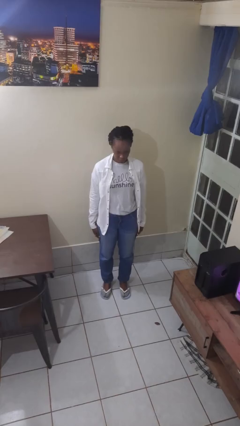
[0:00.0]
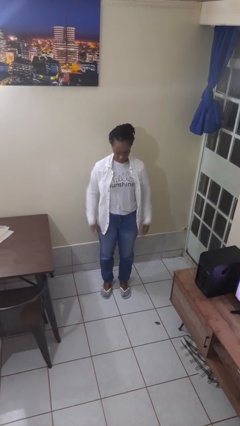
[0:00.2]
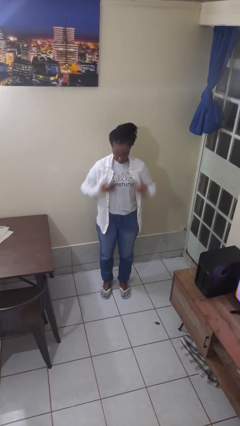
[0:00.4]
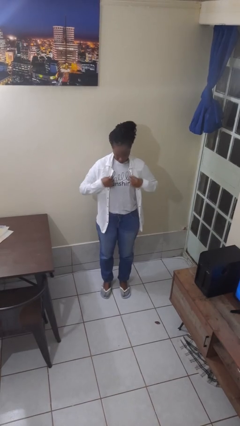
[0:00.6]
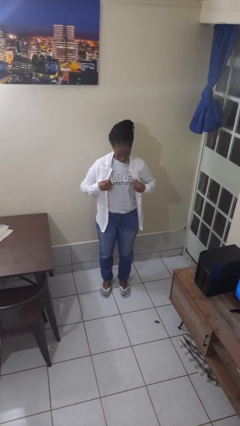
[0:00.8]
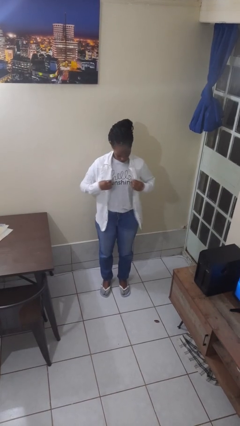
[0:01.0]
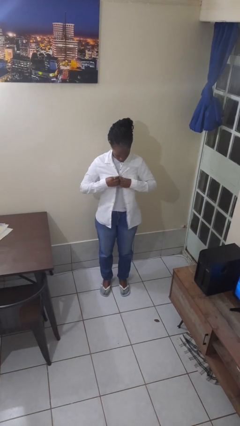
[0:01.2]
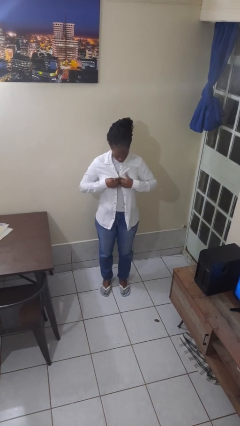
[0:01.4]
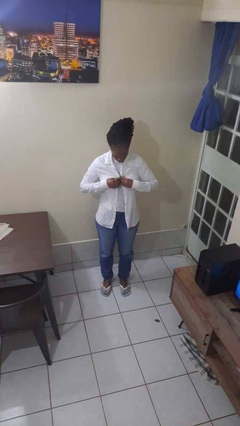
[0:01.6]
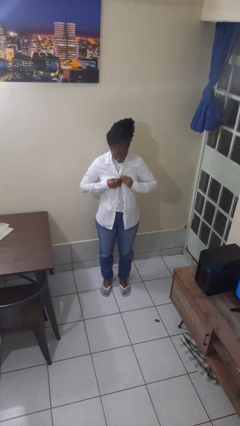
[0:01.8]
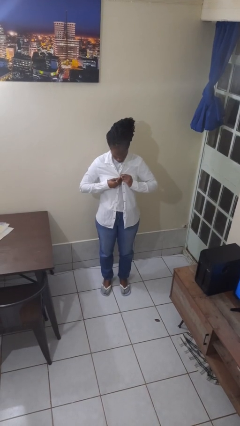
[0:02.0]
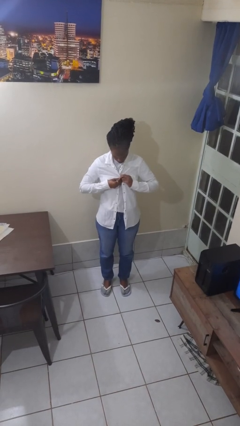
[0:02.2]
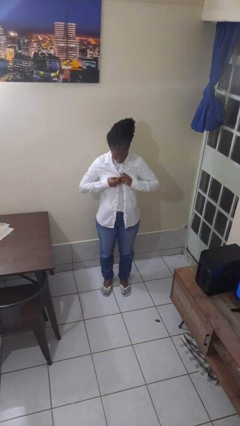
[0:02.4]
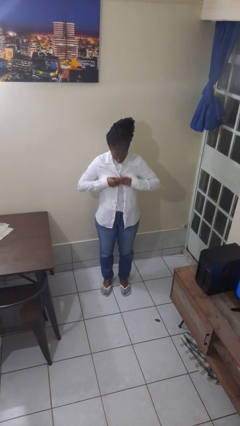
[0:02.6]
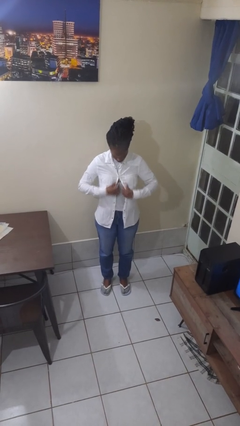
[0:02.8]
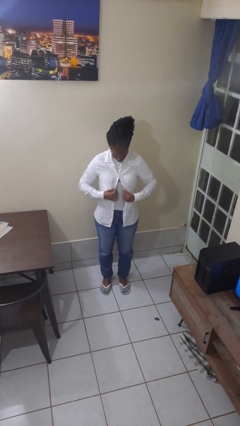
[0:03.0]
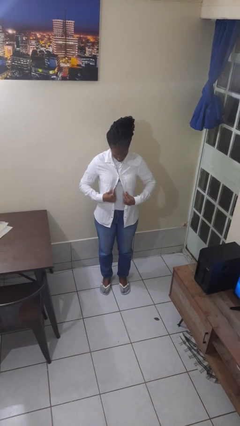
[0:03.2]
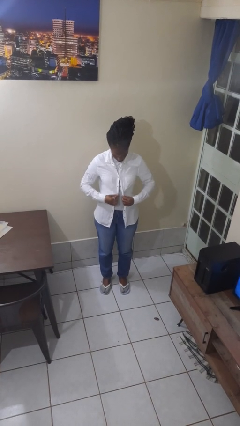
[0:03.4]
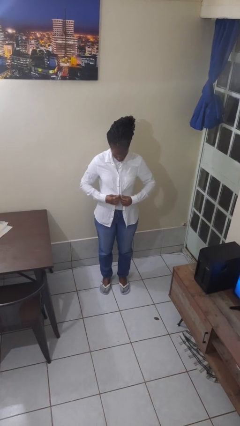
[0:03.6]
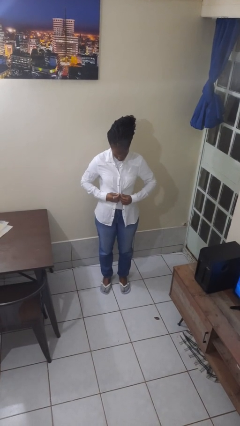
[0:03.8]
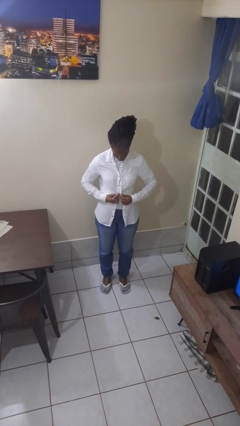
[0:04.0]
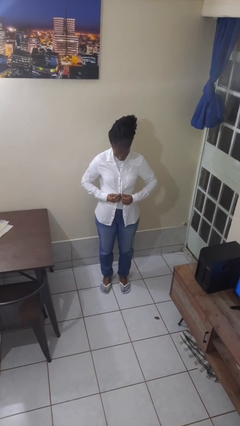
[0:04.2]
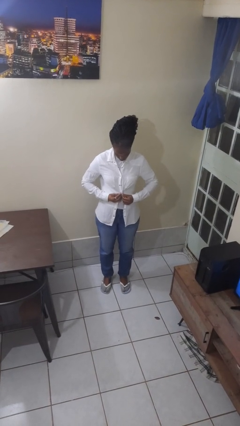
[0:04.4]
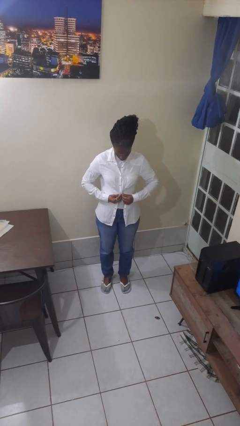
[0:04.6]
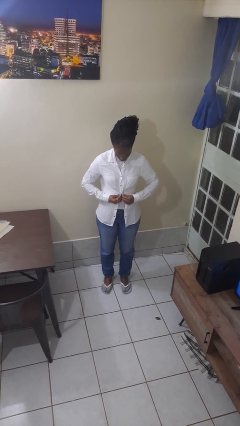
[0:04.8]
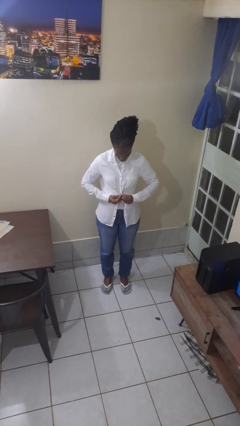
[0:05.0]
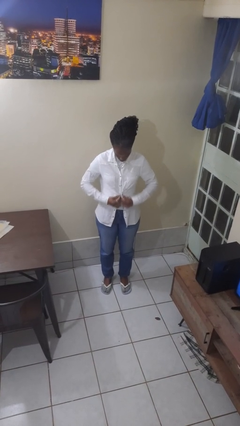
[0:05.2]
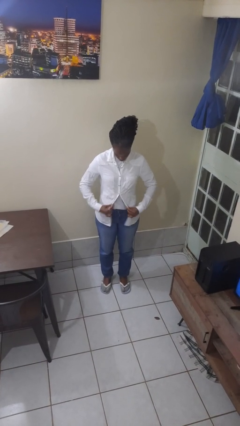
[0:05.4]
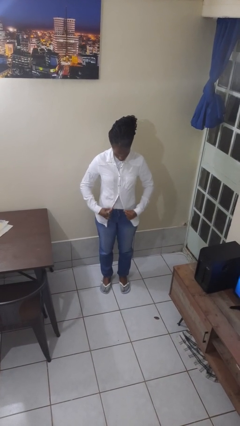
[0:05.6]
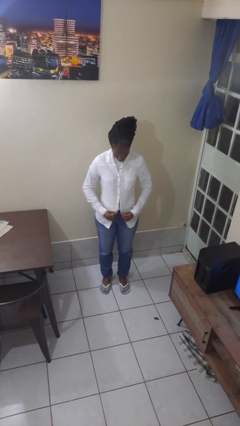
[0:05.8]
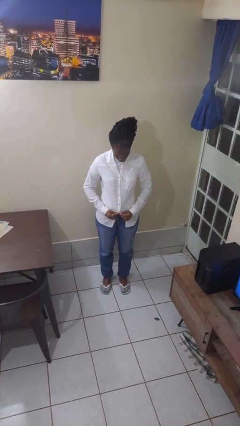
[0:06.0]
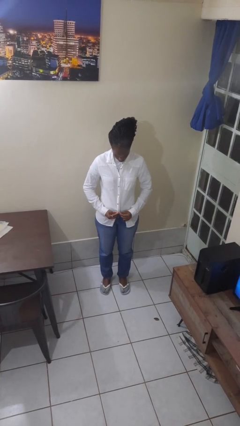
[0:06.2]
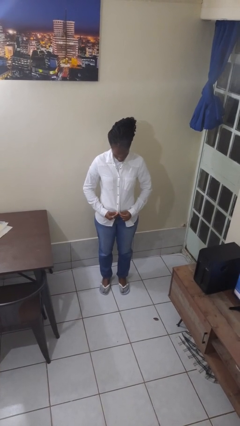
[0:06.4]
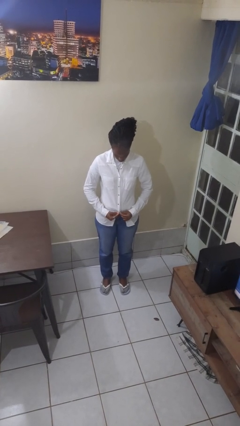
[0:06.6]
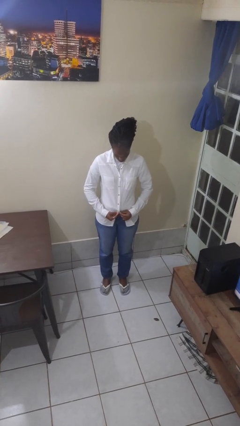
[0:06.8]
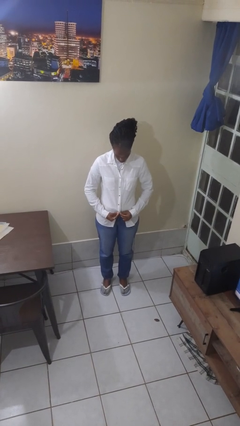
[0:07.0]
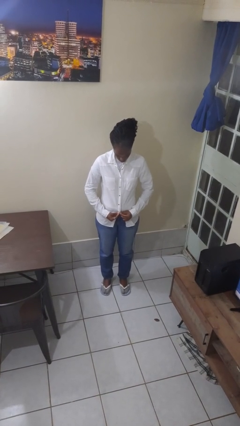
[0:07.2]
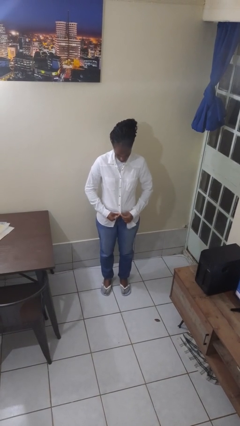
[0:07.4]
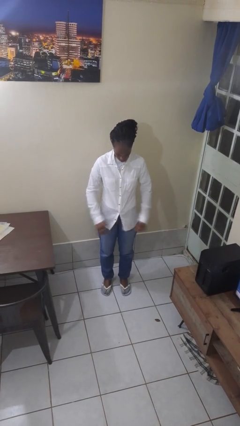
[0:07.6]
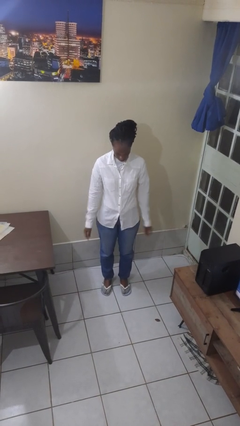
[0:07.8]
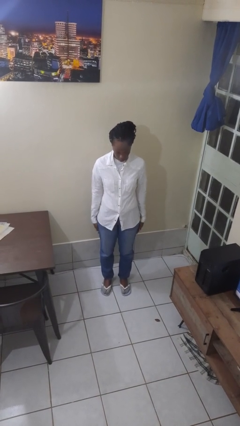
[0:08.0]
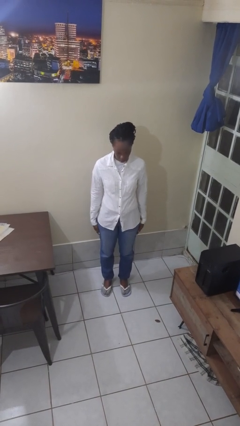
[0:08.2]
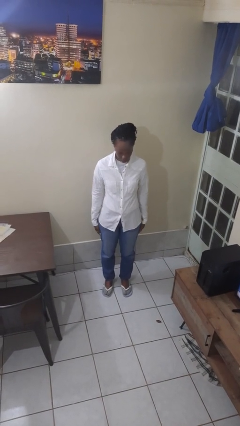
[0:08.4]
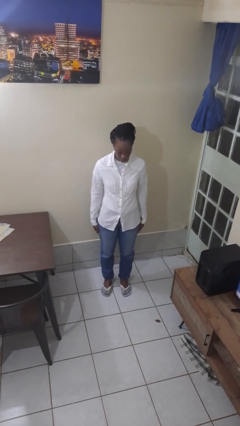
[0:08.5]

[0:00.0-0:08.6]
person buttons shirt

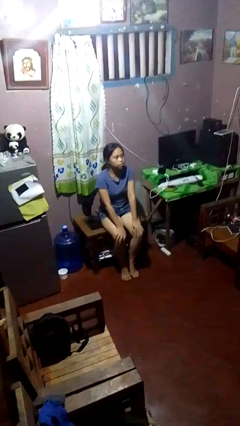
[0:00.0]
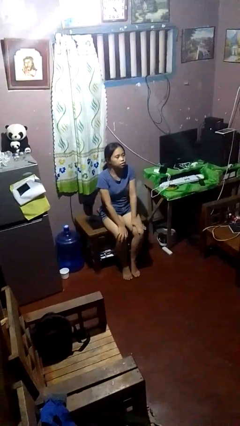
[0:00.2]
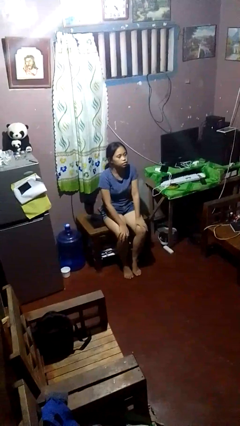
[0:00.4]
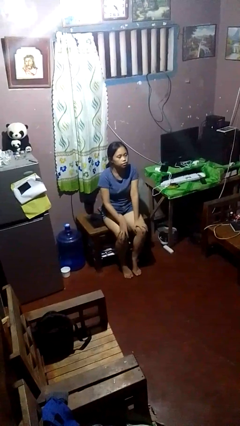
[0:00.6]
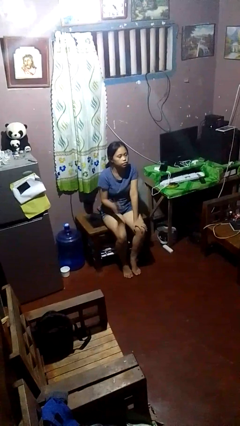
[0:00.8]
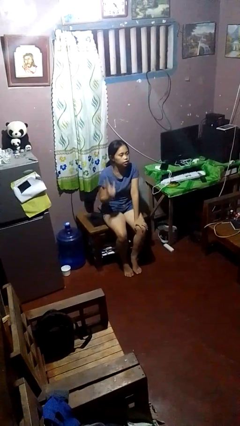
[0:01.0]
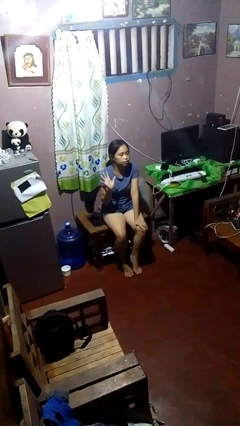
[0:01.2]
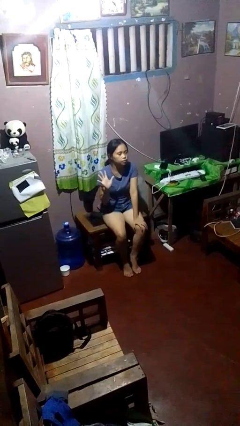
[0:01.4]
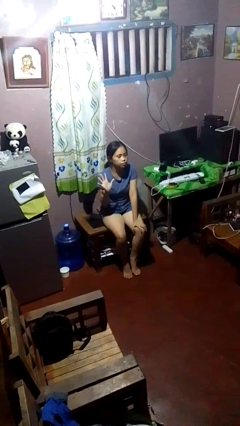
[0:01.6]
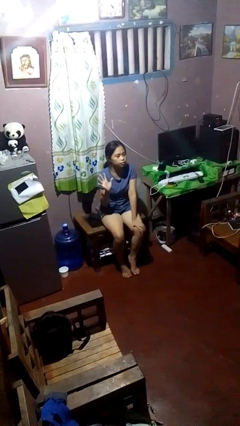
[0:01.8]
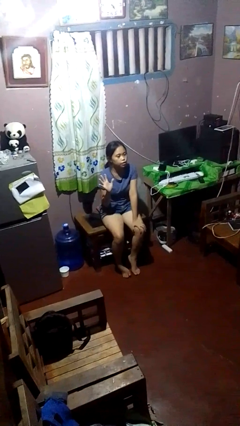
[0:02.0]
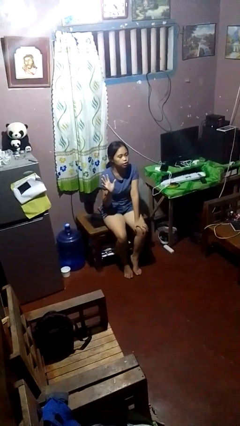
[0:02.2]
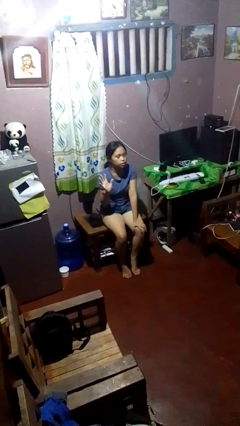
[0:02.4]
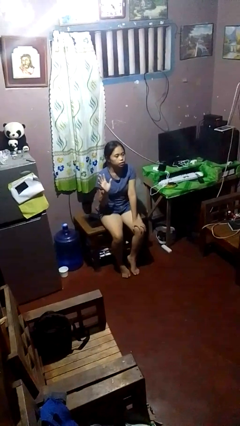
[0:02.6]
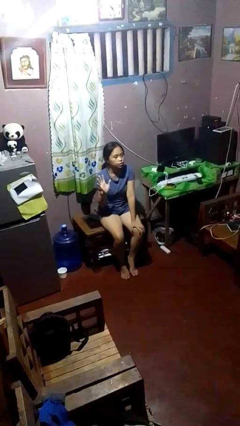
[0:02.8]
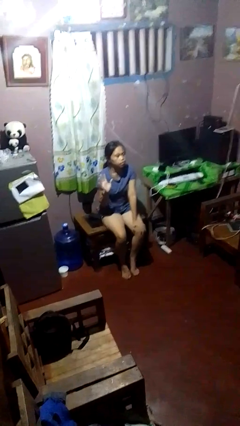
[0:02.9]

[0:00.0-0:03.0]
person gestures number five

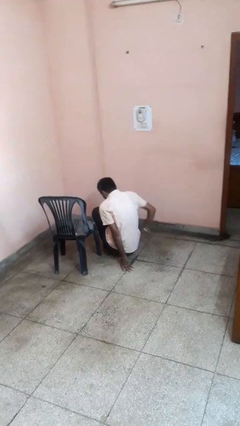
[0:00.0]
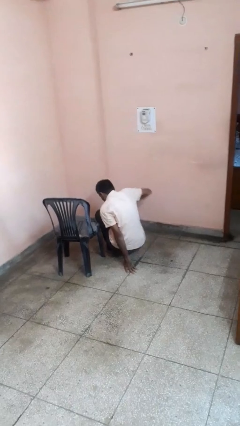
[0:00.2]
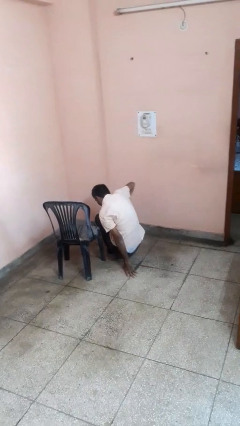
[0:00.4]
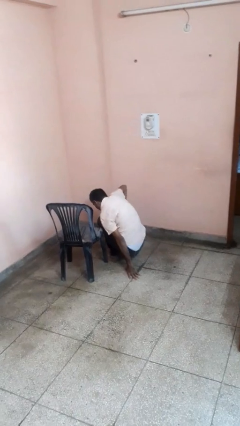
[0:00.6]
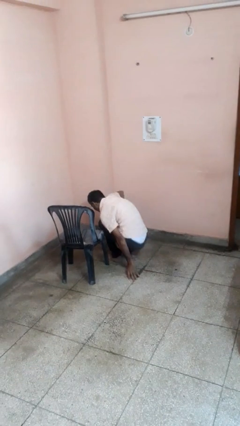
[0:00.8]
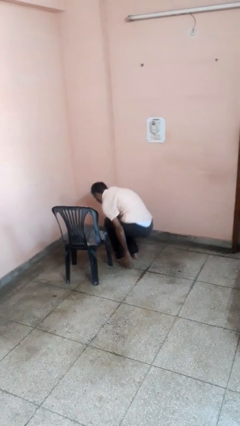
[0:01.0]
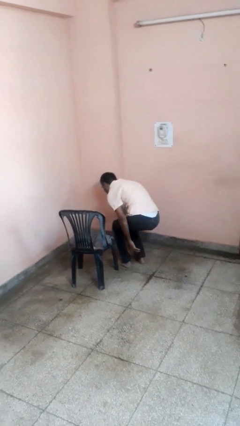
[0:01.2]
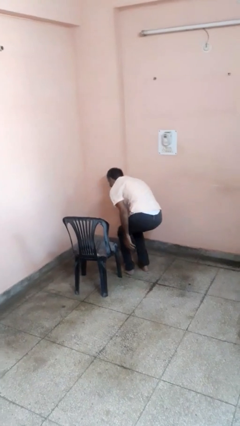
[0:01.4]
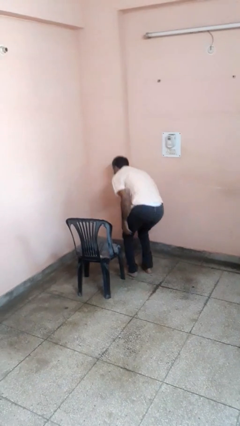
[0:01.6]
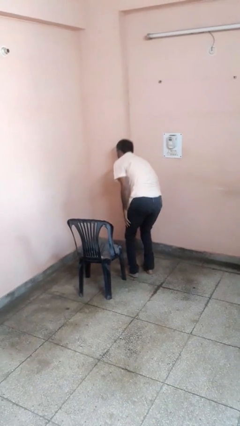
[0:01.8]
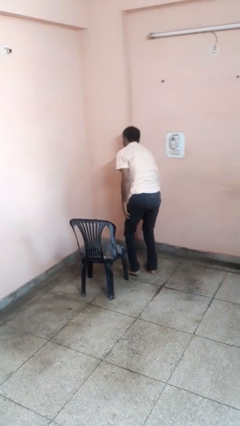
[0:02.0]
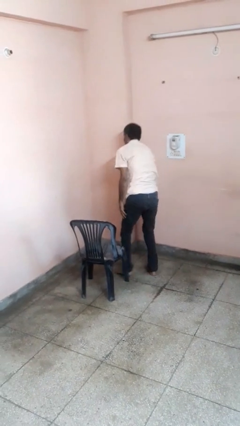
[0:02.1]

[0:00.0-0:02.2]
person stands up from floor

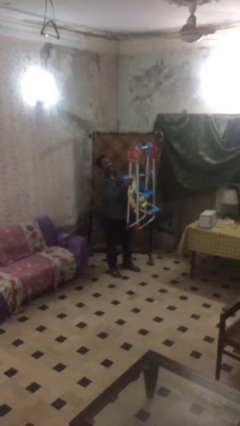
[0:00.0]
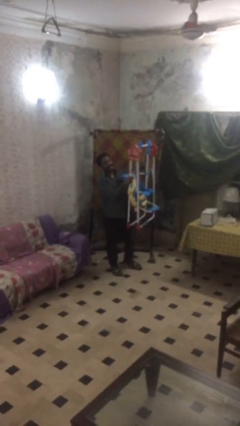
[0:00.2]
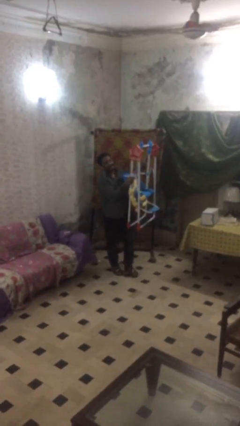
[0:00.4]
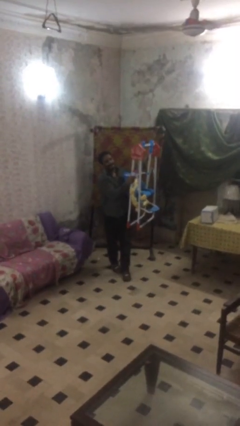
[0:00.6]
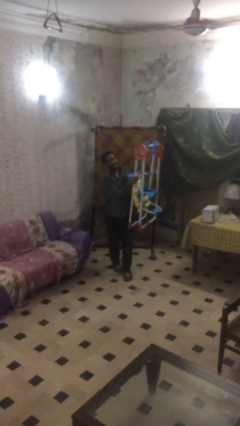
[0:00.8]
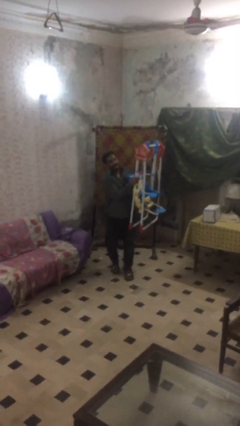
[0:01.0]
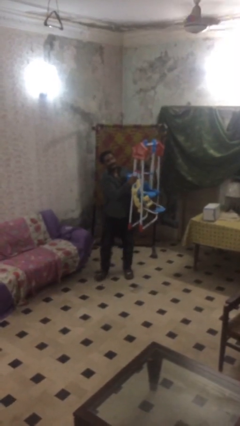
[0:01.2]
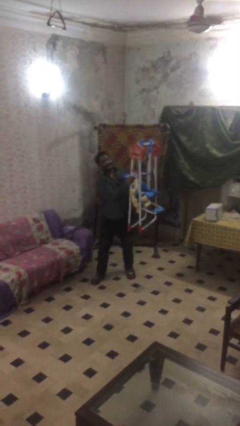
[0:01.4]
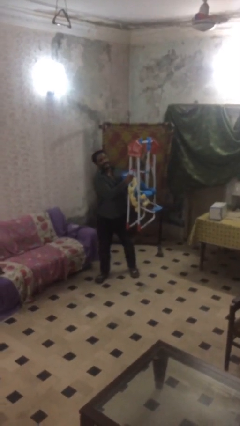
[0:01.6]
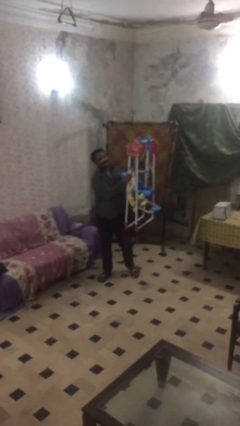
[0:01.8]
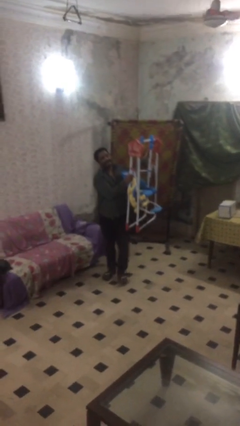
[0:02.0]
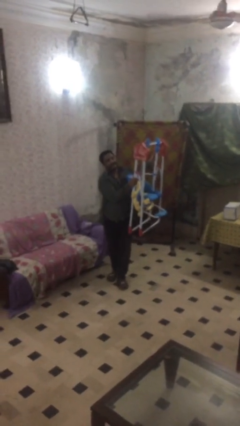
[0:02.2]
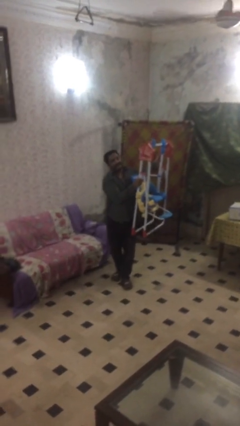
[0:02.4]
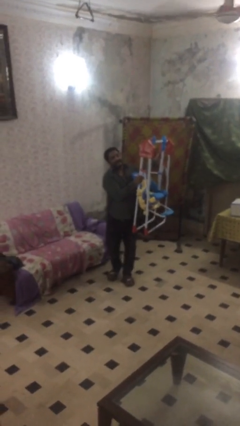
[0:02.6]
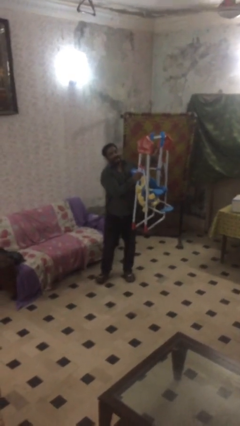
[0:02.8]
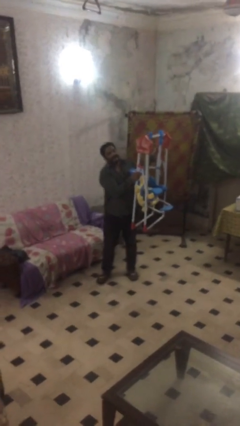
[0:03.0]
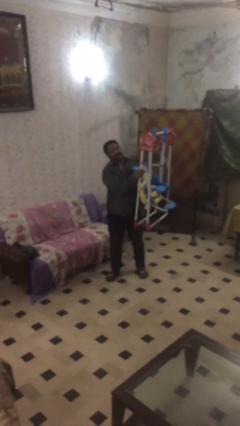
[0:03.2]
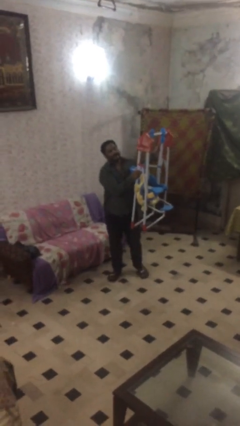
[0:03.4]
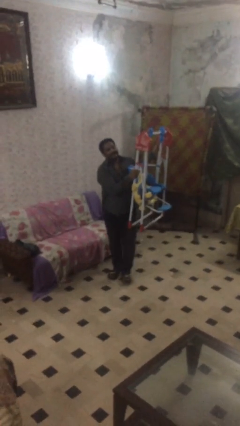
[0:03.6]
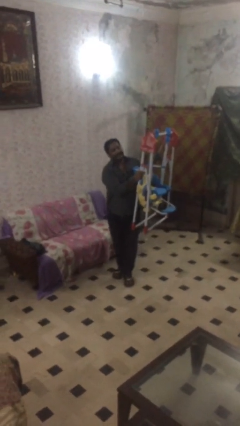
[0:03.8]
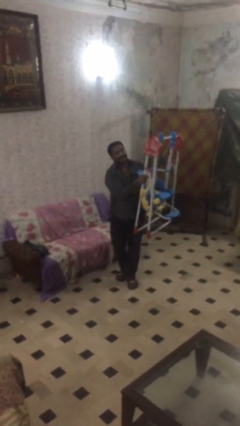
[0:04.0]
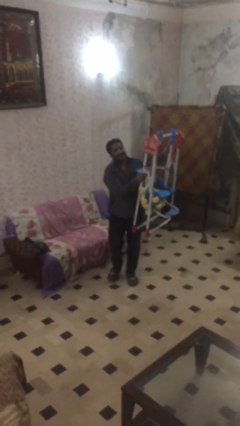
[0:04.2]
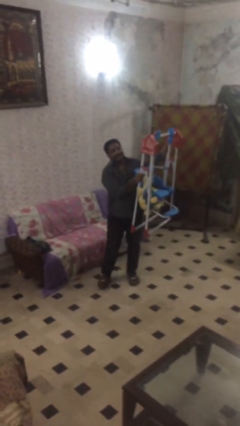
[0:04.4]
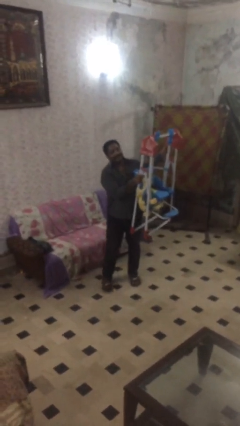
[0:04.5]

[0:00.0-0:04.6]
person carries heavy object
